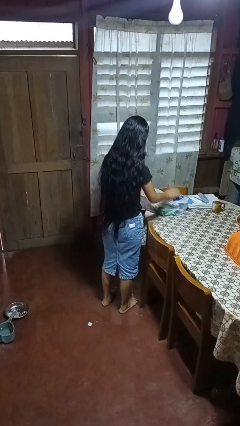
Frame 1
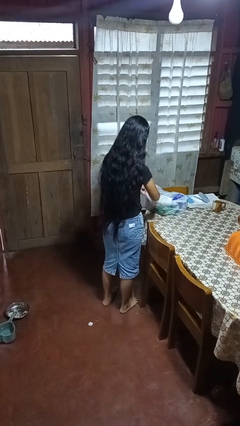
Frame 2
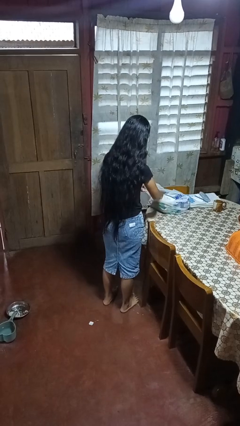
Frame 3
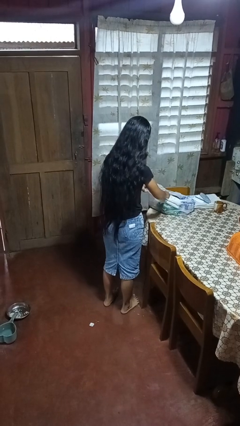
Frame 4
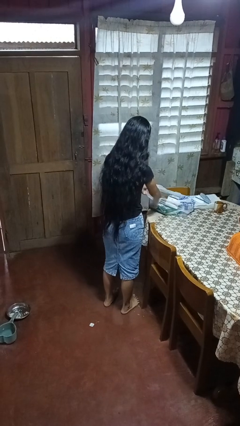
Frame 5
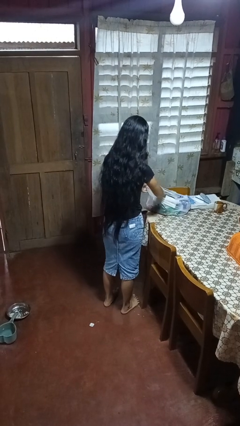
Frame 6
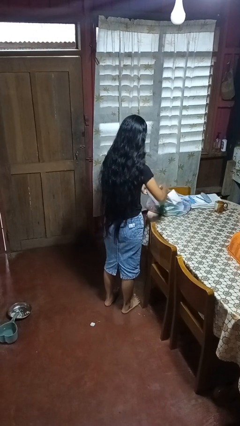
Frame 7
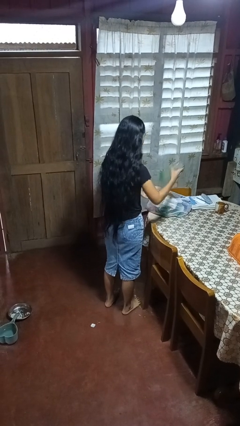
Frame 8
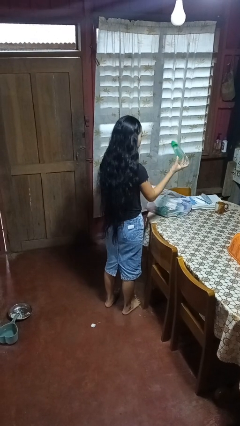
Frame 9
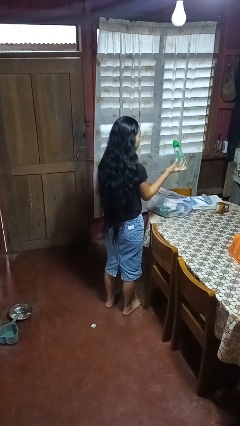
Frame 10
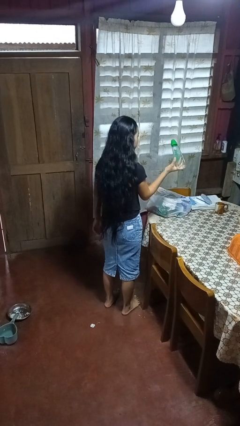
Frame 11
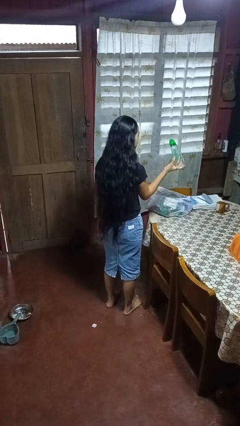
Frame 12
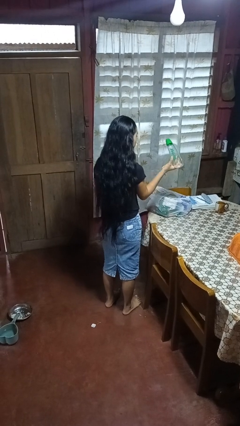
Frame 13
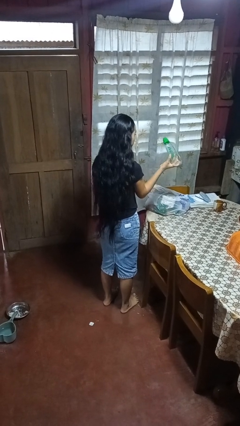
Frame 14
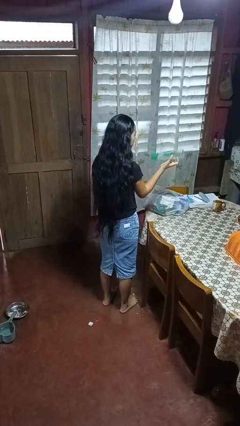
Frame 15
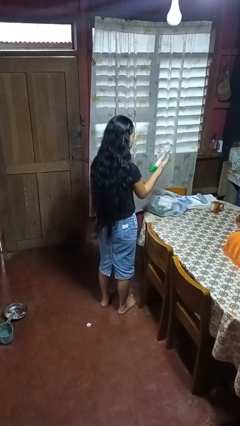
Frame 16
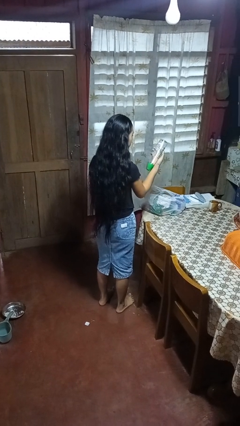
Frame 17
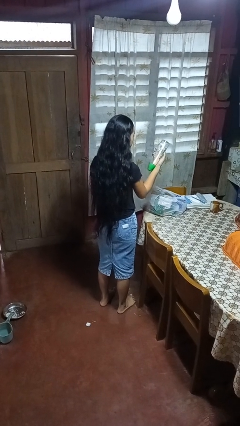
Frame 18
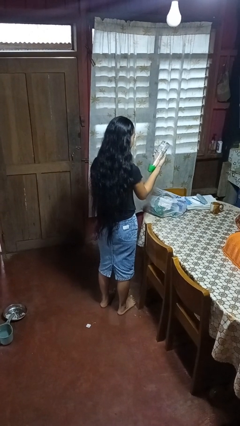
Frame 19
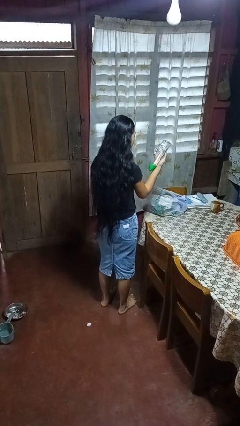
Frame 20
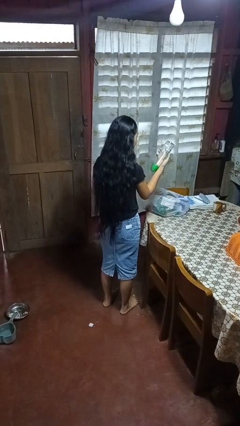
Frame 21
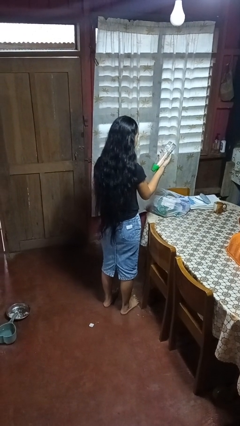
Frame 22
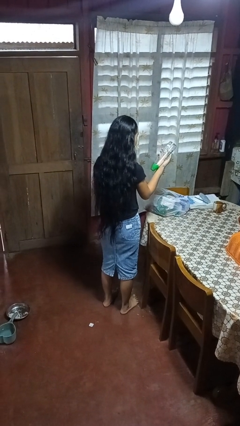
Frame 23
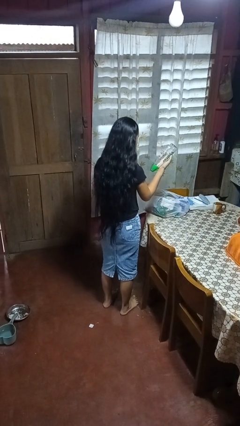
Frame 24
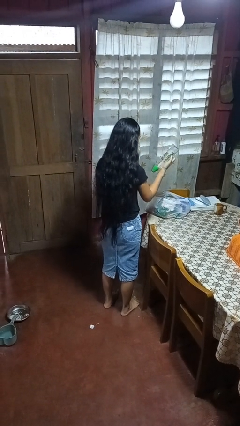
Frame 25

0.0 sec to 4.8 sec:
person takes object from bag

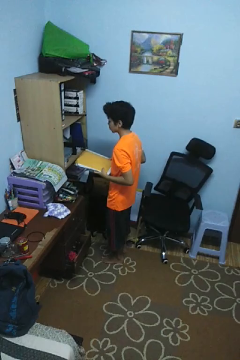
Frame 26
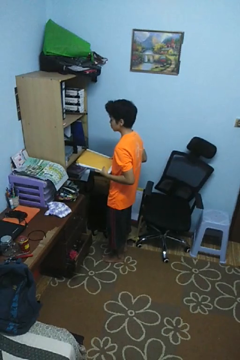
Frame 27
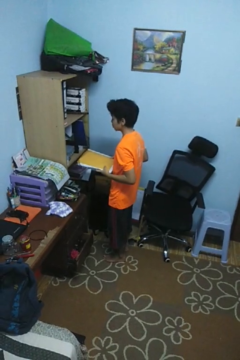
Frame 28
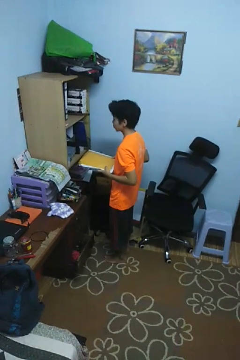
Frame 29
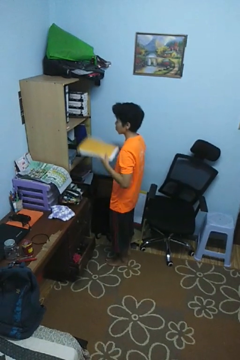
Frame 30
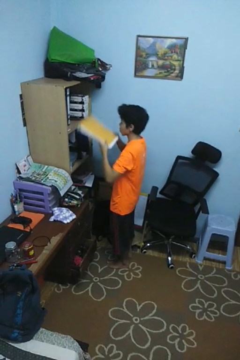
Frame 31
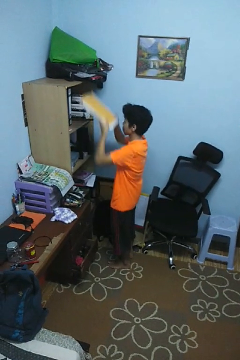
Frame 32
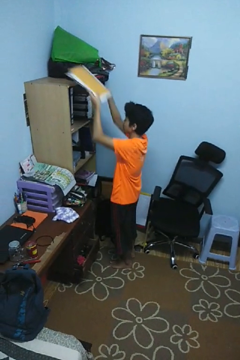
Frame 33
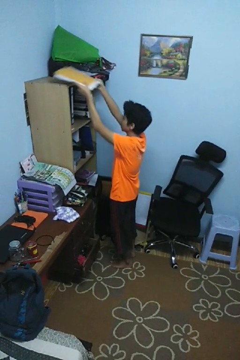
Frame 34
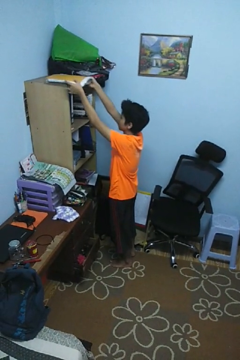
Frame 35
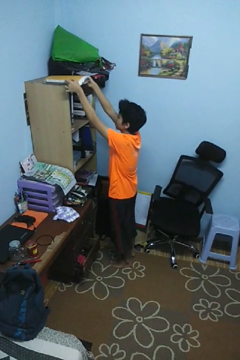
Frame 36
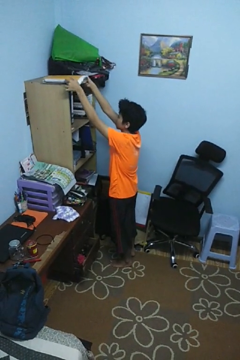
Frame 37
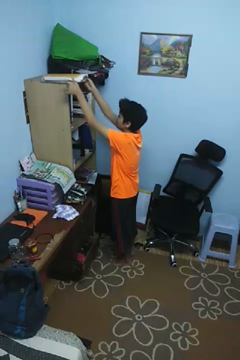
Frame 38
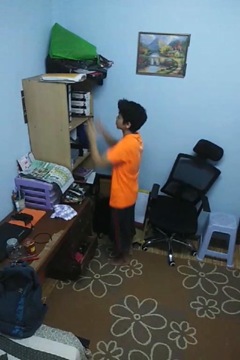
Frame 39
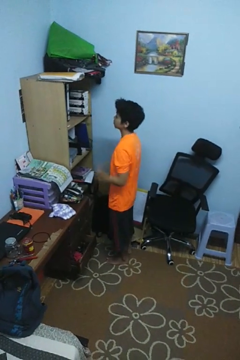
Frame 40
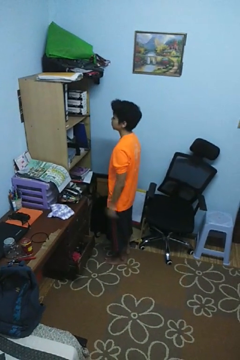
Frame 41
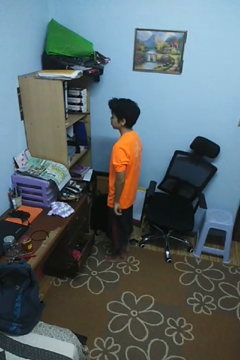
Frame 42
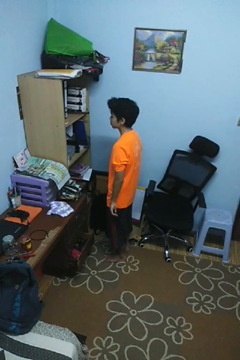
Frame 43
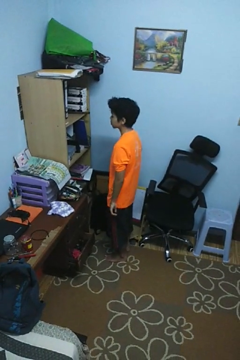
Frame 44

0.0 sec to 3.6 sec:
person puts down object on shelf

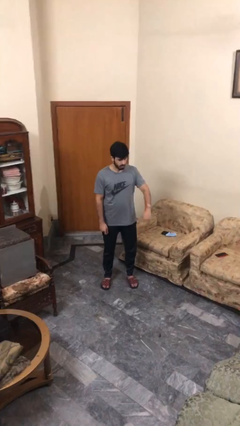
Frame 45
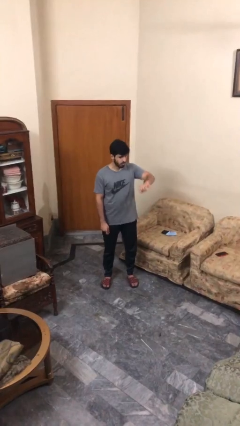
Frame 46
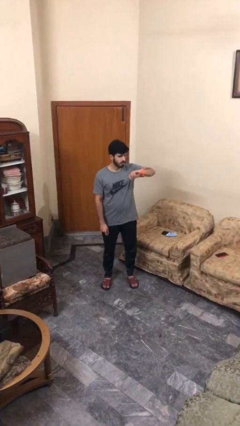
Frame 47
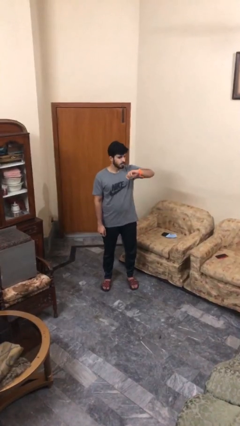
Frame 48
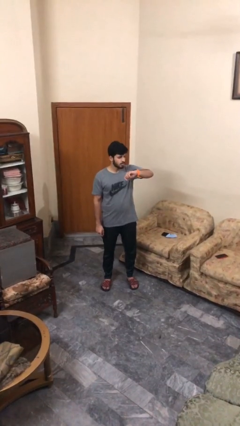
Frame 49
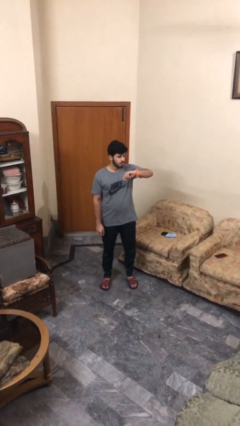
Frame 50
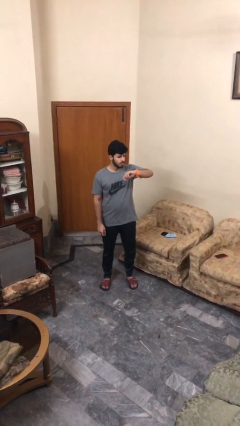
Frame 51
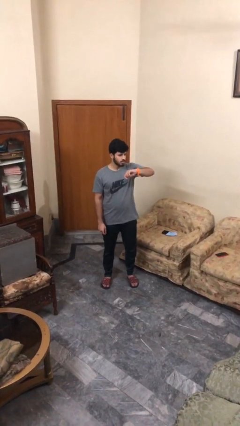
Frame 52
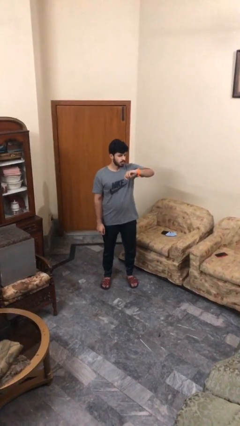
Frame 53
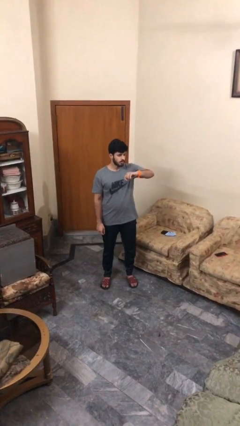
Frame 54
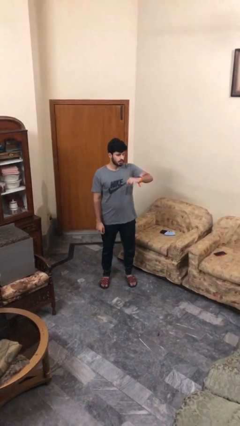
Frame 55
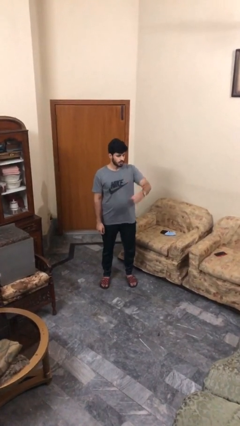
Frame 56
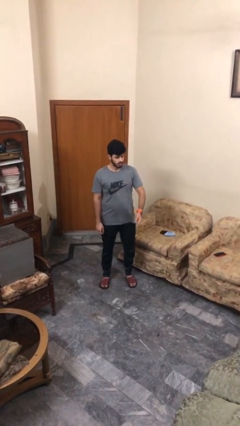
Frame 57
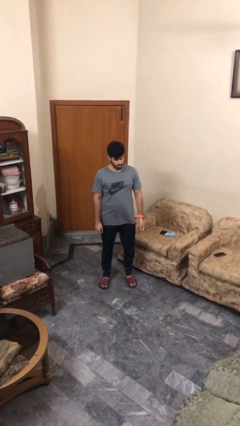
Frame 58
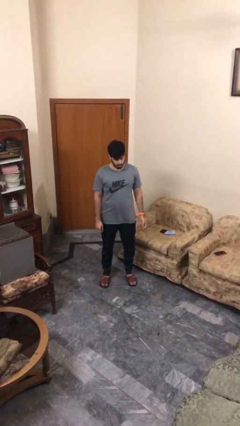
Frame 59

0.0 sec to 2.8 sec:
person looks at wristwatch

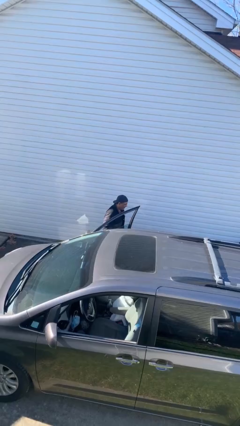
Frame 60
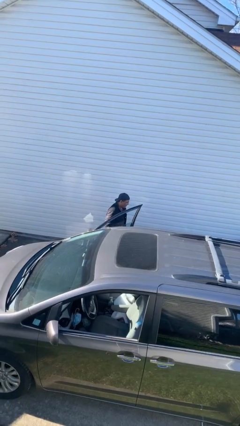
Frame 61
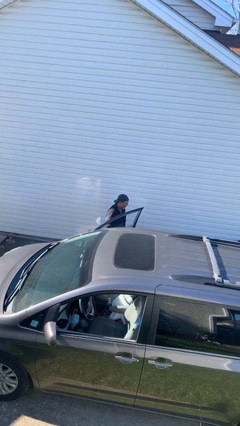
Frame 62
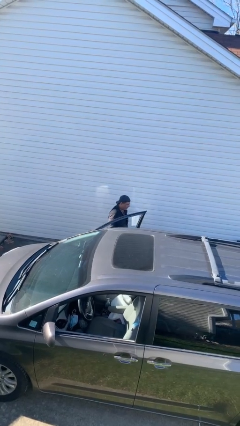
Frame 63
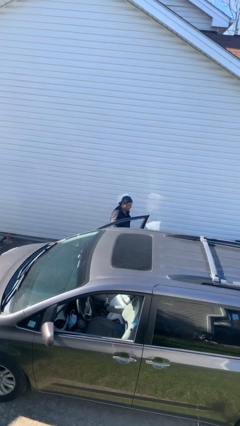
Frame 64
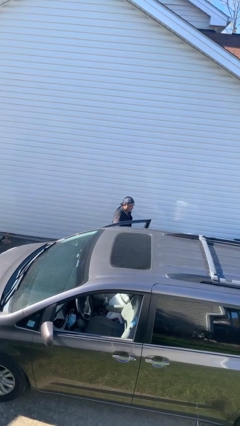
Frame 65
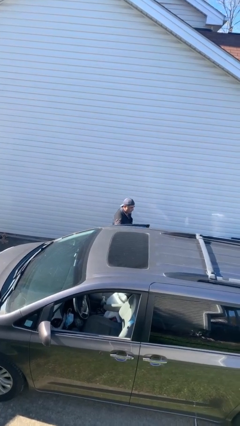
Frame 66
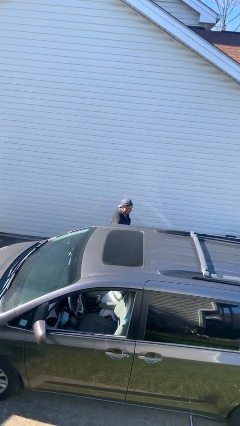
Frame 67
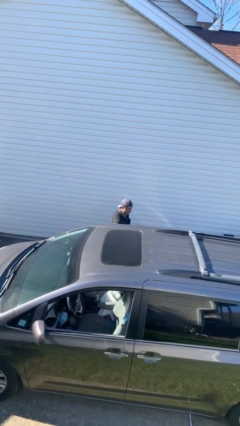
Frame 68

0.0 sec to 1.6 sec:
person closes car door

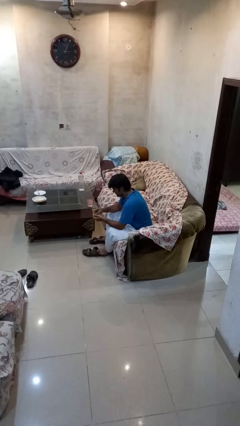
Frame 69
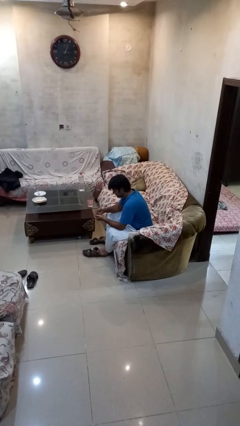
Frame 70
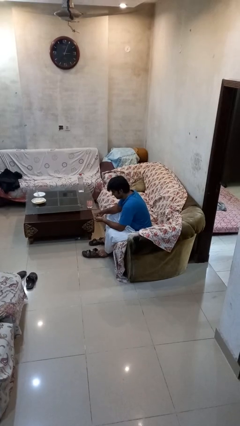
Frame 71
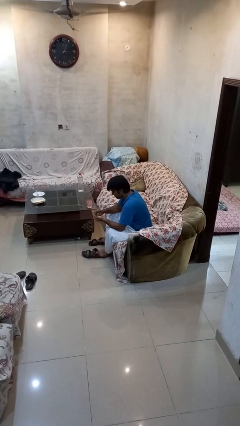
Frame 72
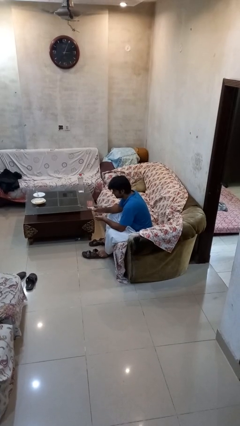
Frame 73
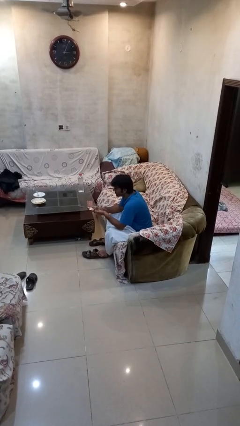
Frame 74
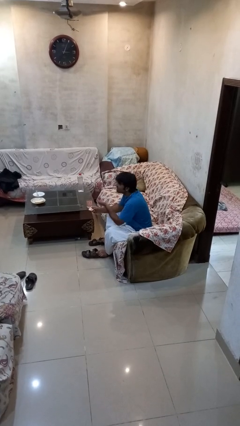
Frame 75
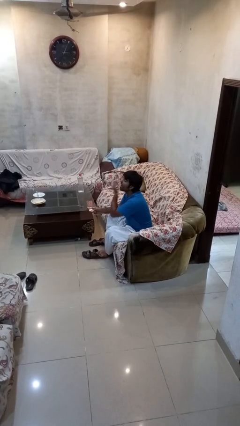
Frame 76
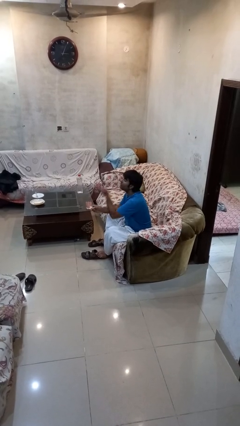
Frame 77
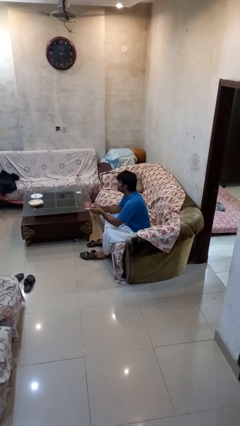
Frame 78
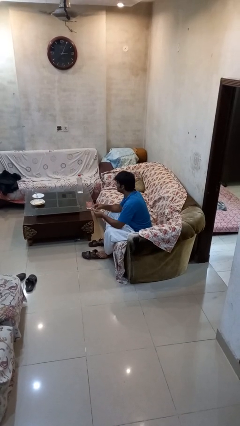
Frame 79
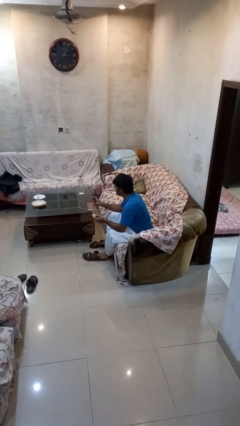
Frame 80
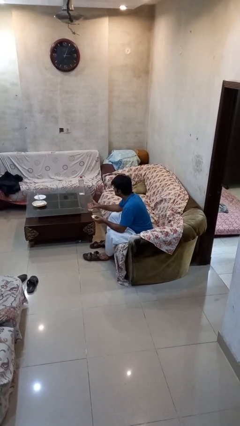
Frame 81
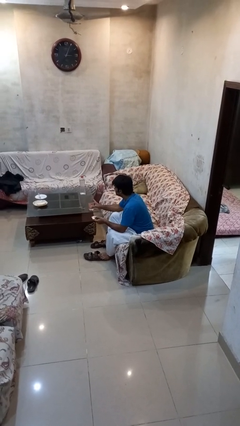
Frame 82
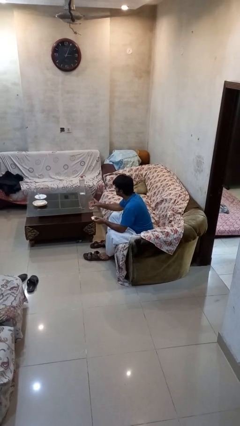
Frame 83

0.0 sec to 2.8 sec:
person takes medicine pills

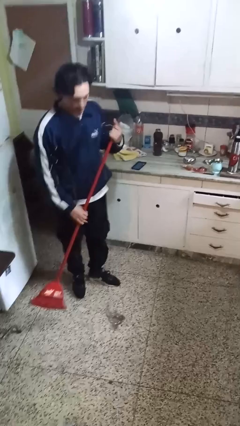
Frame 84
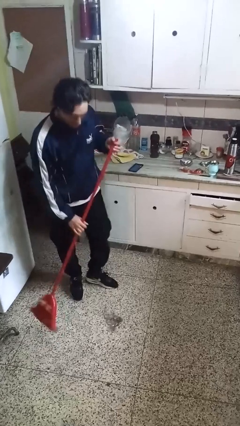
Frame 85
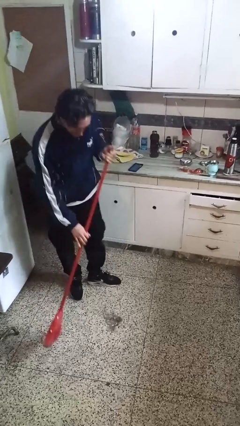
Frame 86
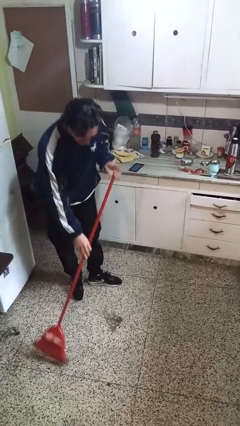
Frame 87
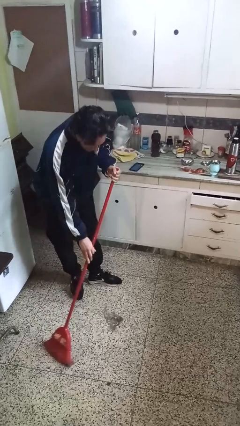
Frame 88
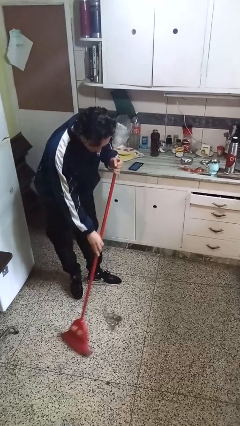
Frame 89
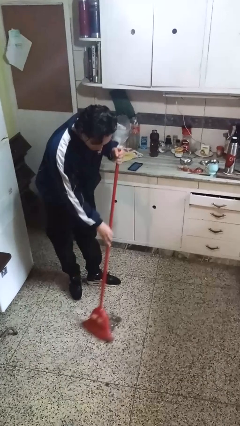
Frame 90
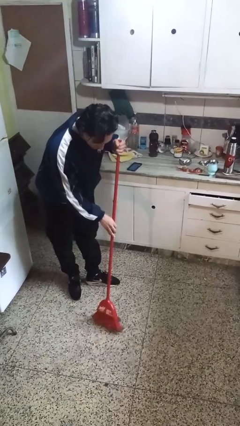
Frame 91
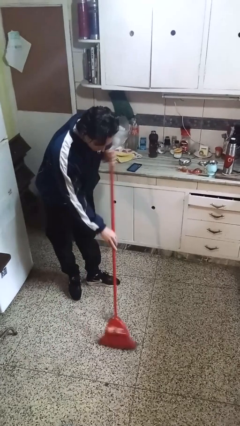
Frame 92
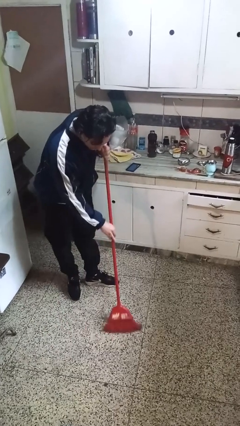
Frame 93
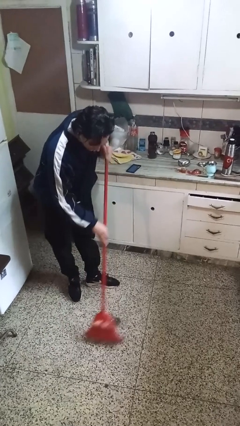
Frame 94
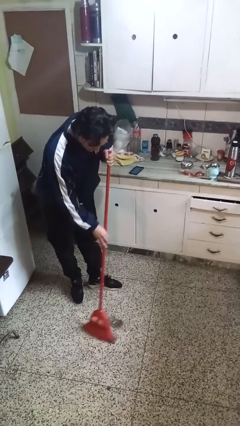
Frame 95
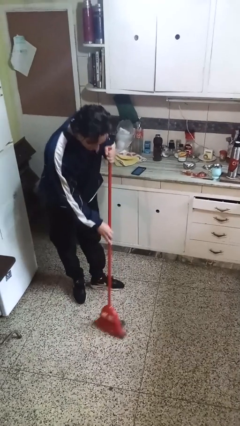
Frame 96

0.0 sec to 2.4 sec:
person sweeps floor
